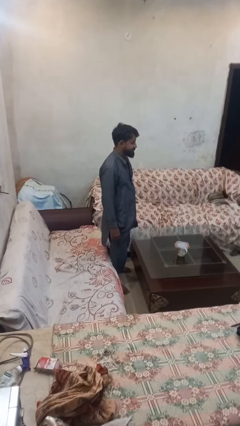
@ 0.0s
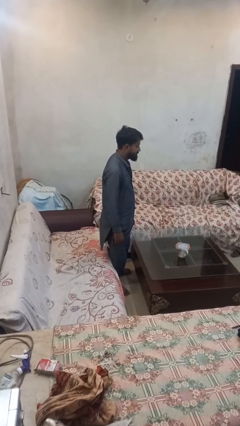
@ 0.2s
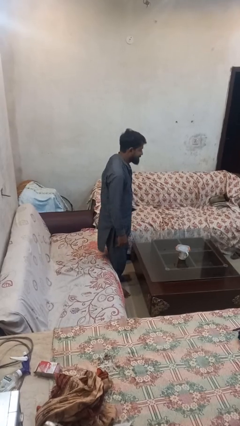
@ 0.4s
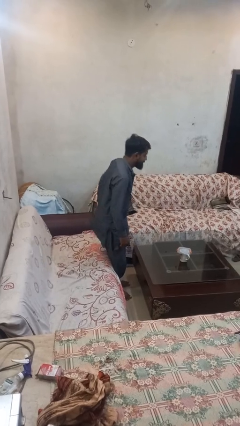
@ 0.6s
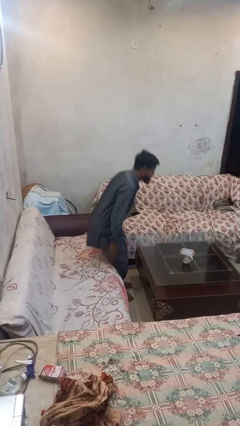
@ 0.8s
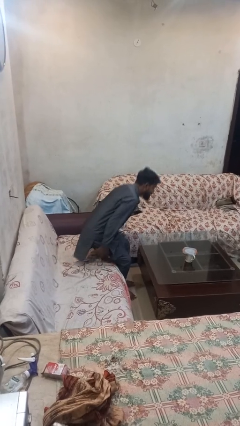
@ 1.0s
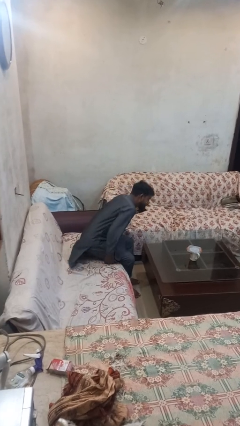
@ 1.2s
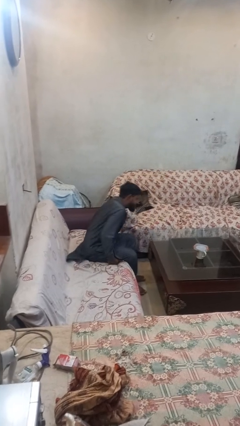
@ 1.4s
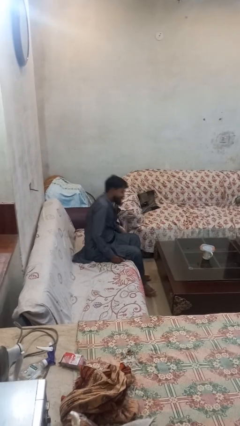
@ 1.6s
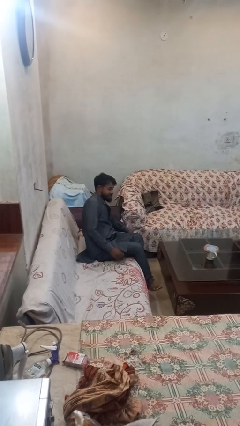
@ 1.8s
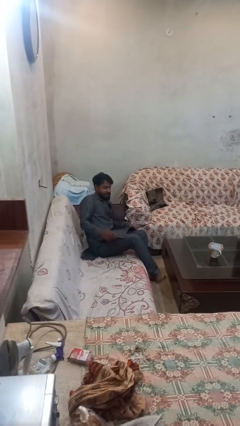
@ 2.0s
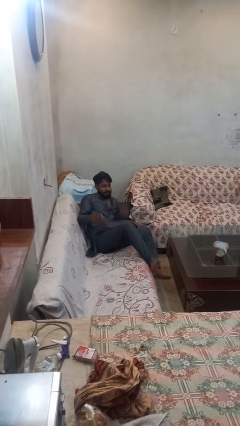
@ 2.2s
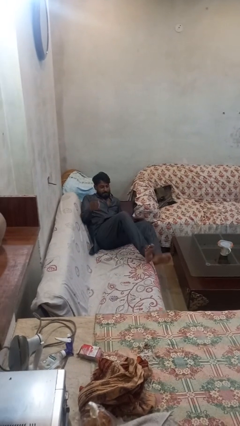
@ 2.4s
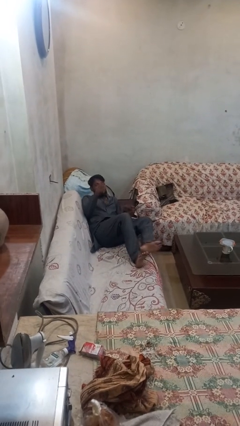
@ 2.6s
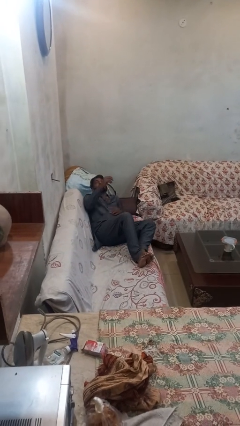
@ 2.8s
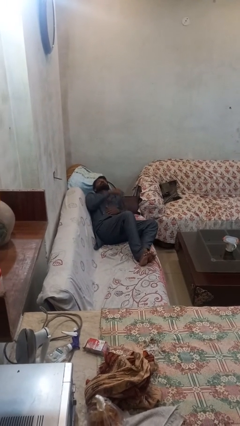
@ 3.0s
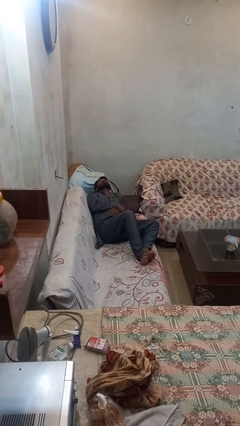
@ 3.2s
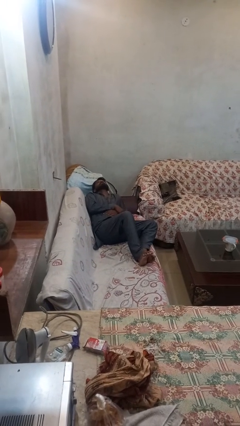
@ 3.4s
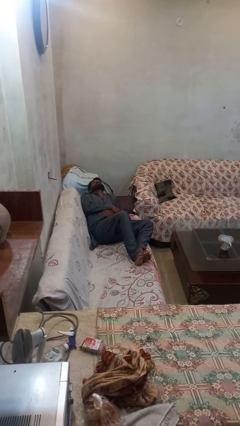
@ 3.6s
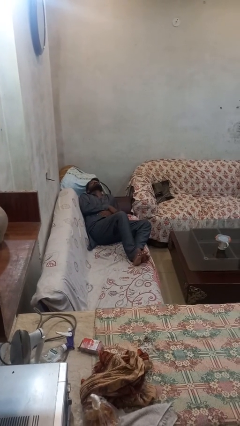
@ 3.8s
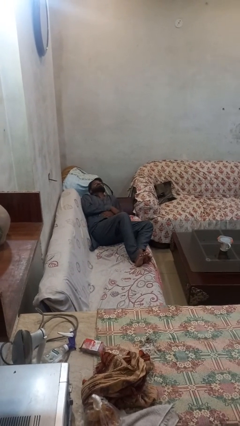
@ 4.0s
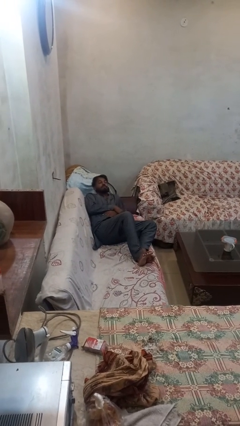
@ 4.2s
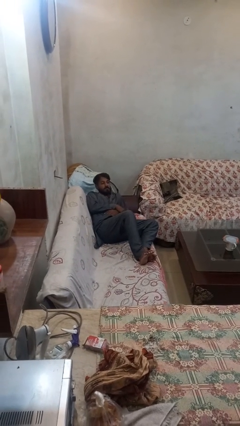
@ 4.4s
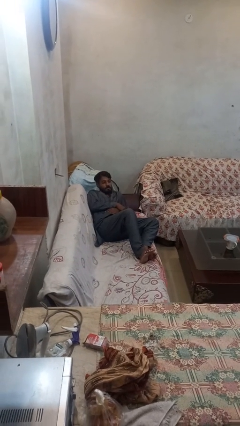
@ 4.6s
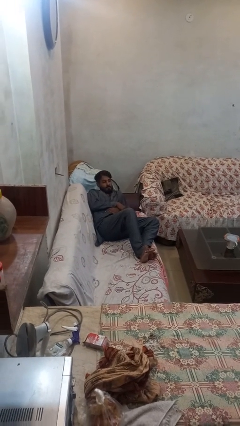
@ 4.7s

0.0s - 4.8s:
person lies down on couch

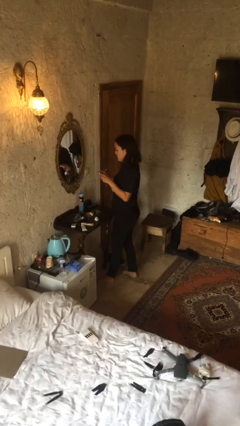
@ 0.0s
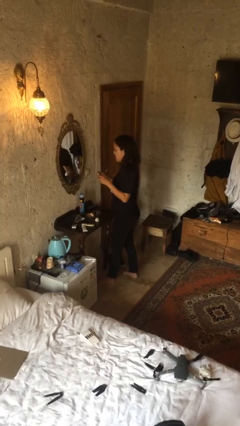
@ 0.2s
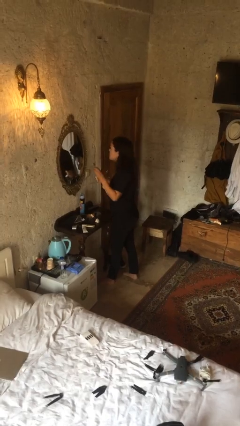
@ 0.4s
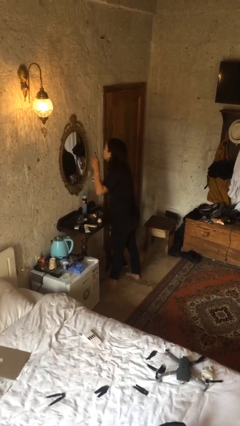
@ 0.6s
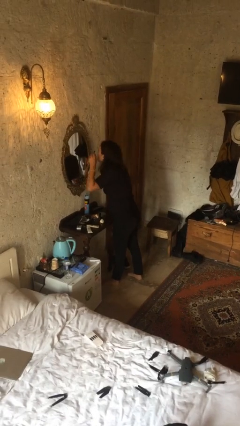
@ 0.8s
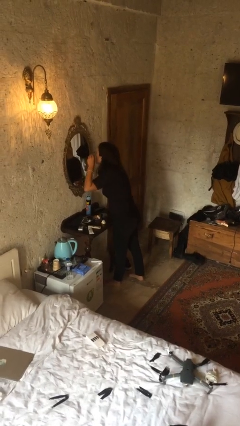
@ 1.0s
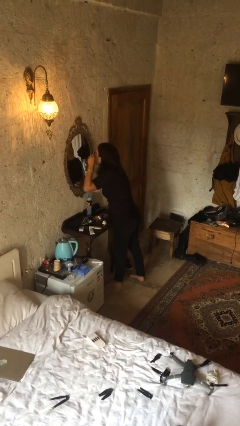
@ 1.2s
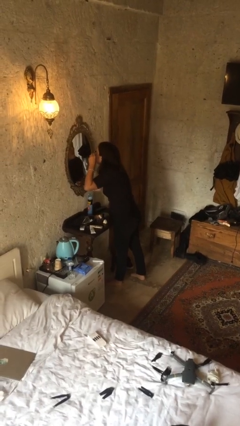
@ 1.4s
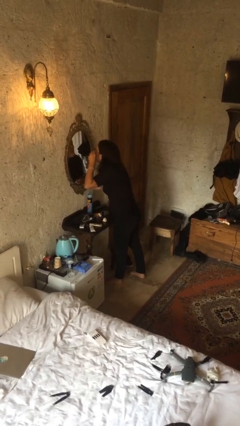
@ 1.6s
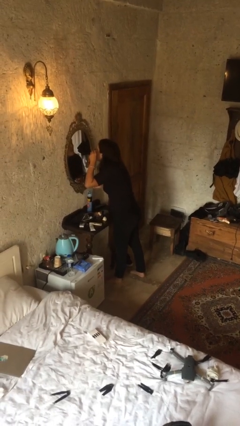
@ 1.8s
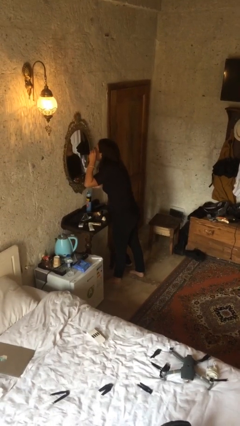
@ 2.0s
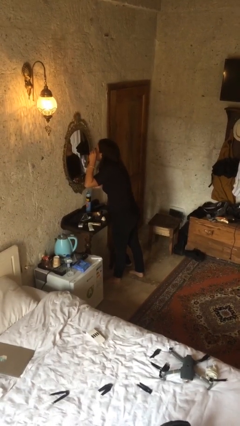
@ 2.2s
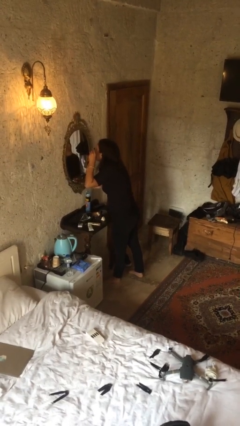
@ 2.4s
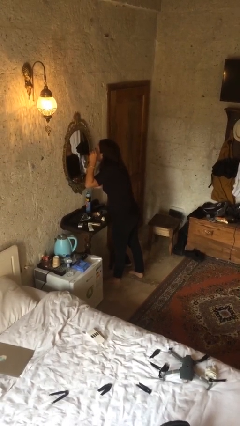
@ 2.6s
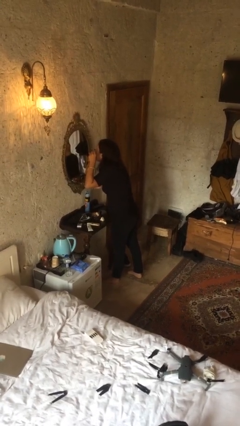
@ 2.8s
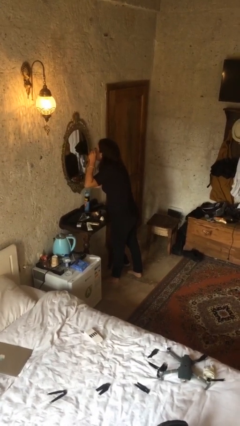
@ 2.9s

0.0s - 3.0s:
person applies eye makeup

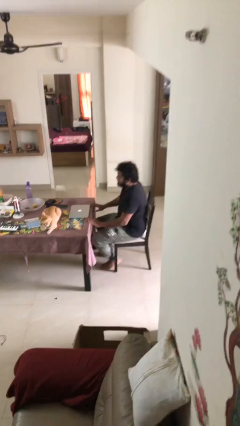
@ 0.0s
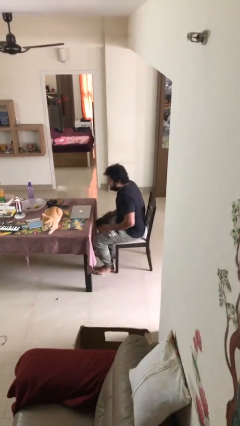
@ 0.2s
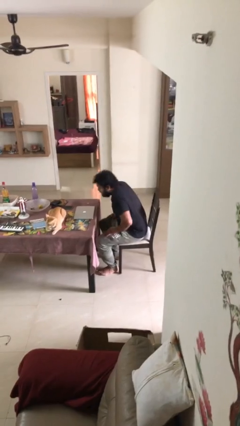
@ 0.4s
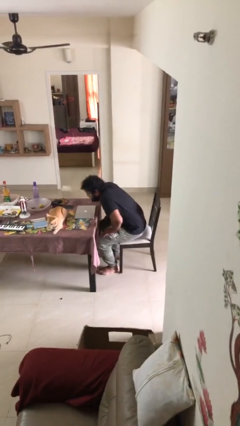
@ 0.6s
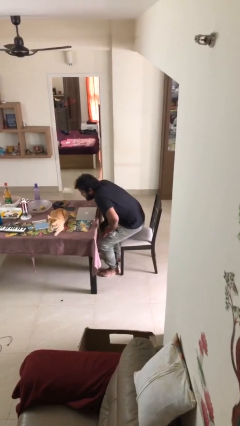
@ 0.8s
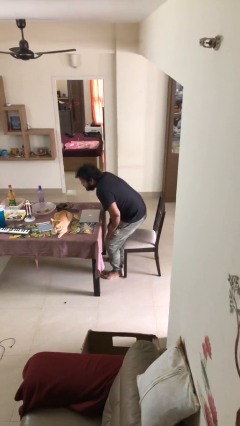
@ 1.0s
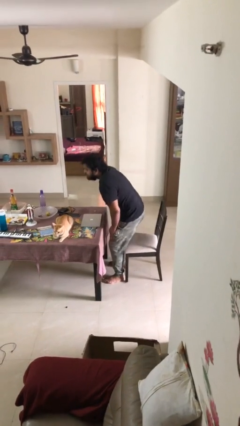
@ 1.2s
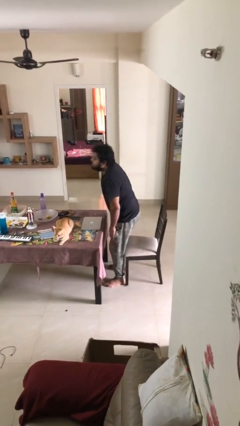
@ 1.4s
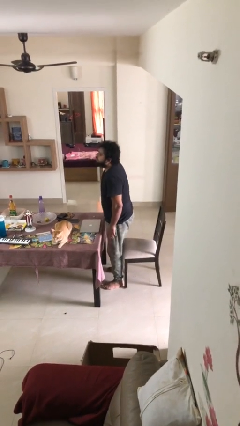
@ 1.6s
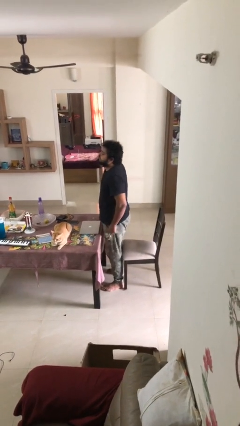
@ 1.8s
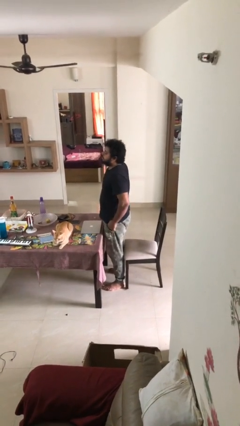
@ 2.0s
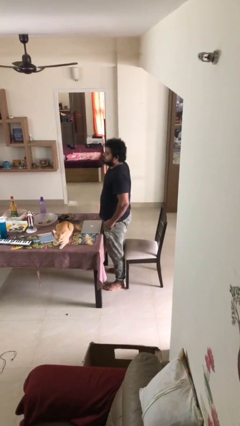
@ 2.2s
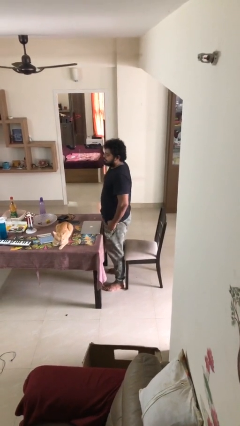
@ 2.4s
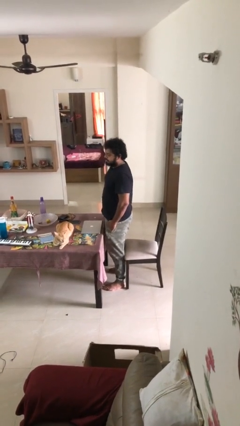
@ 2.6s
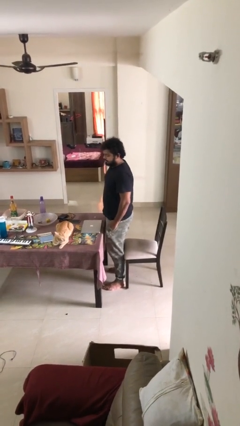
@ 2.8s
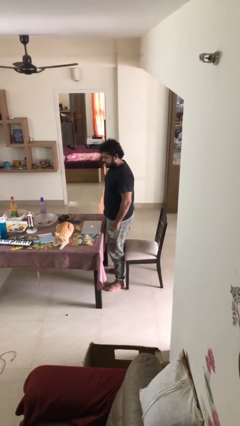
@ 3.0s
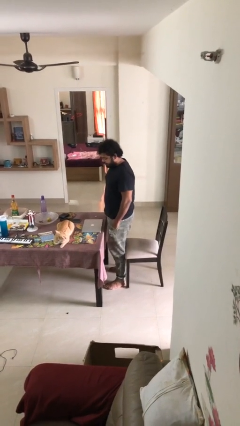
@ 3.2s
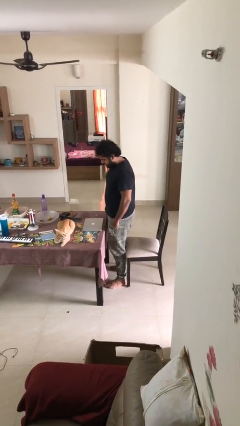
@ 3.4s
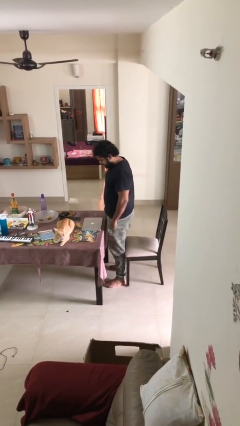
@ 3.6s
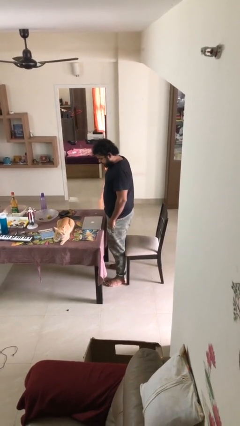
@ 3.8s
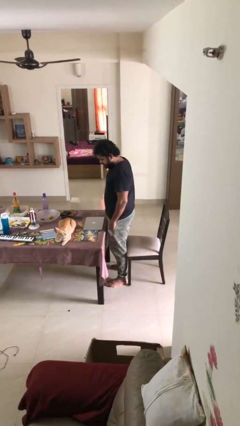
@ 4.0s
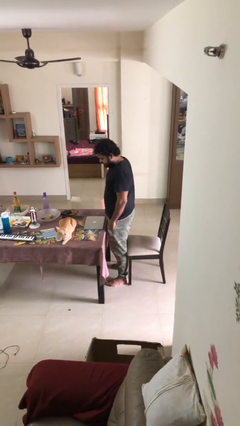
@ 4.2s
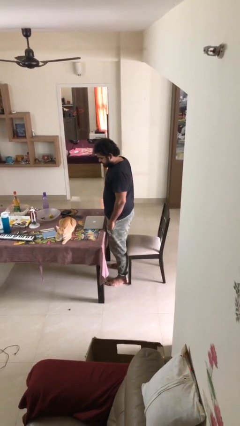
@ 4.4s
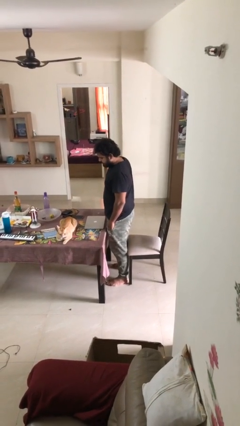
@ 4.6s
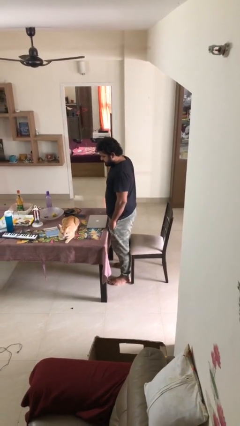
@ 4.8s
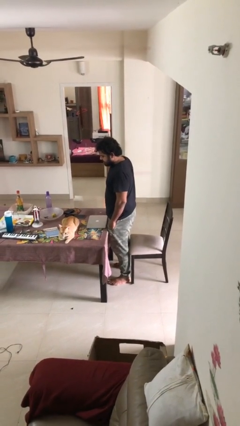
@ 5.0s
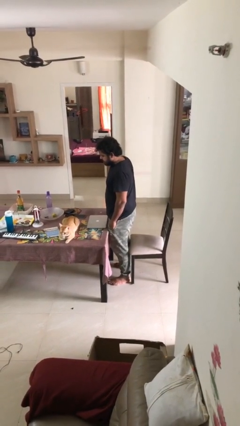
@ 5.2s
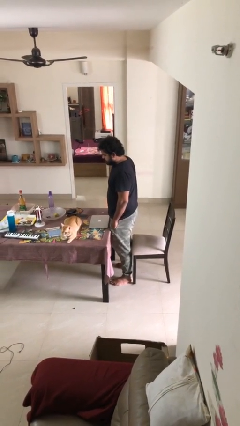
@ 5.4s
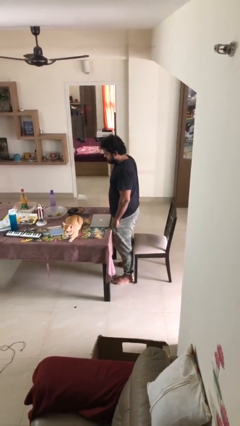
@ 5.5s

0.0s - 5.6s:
person stands up

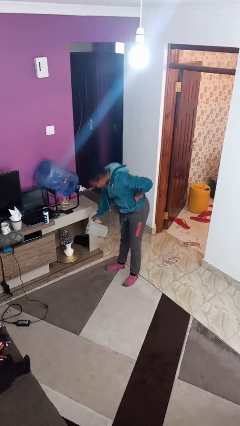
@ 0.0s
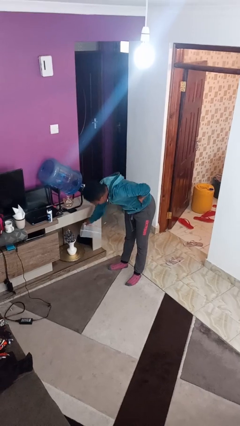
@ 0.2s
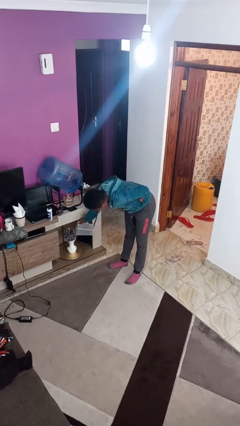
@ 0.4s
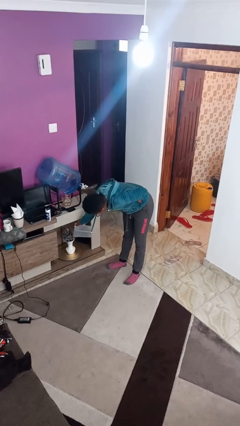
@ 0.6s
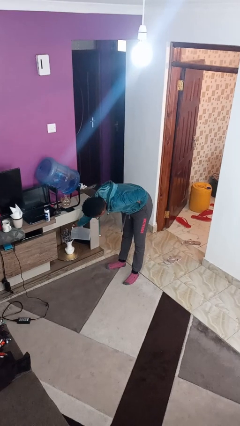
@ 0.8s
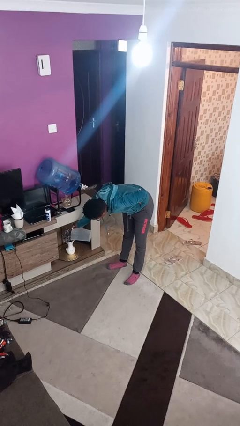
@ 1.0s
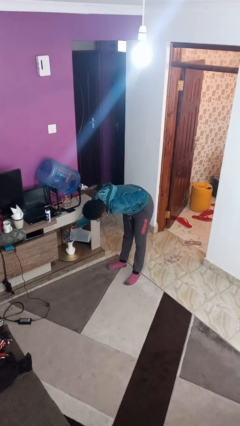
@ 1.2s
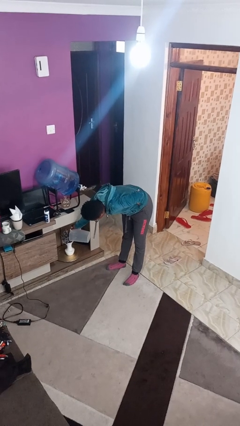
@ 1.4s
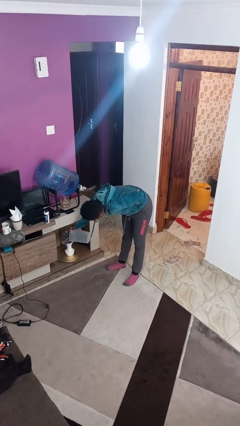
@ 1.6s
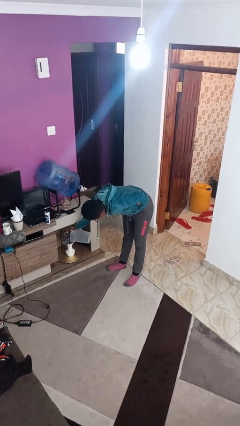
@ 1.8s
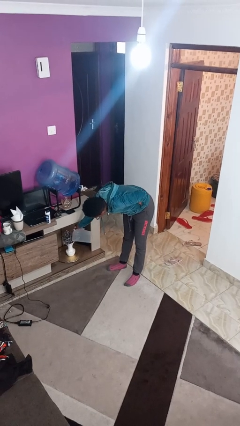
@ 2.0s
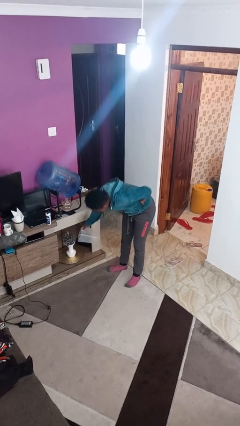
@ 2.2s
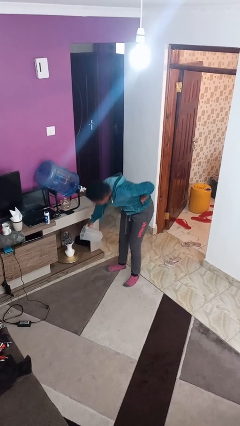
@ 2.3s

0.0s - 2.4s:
person waters houseplant

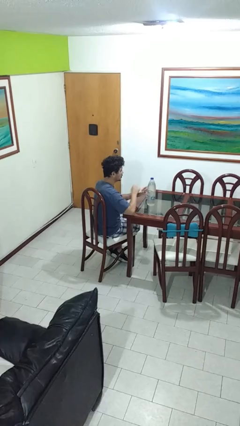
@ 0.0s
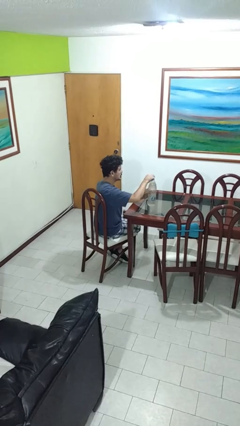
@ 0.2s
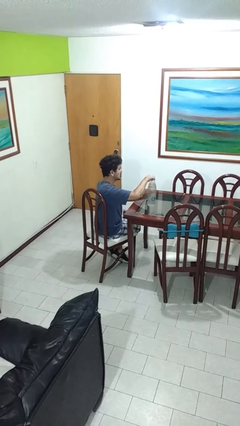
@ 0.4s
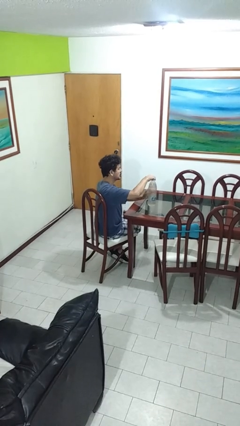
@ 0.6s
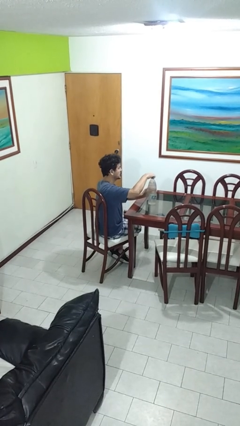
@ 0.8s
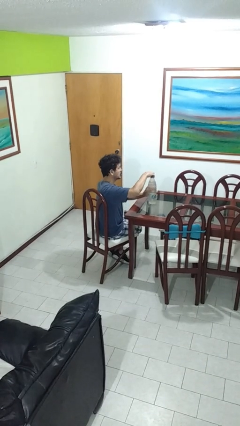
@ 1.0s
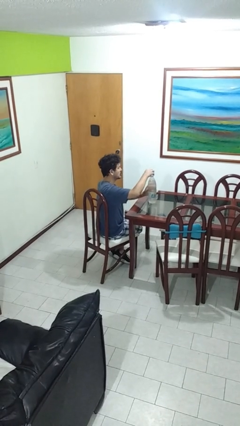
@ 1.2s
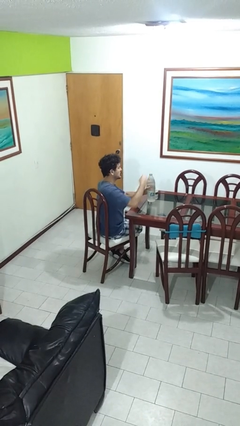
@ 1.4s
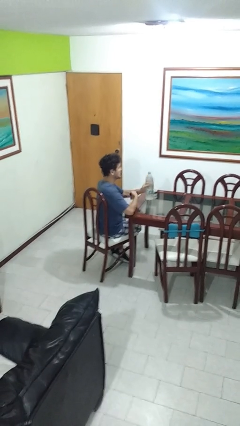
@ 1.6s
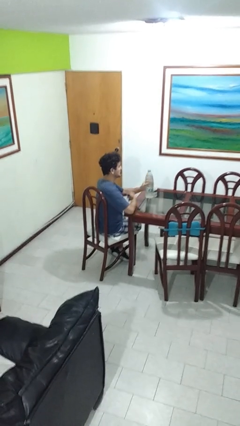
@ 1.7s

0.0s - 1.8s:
person unscrews lid from bottle
